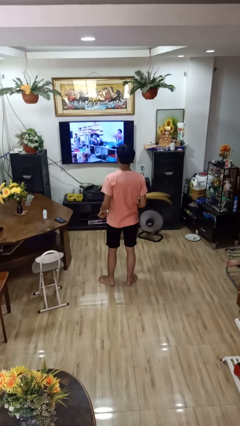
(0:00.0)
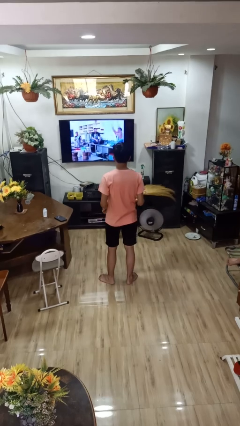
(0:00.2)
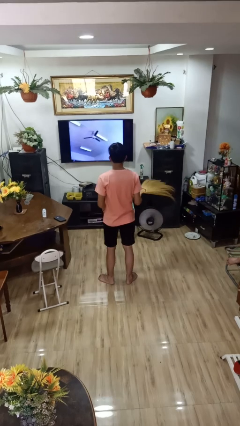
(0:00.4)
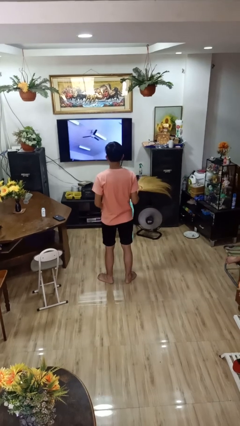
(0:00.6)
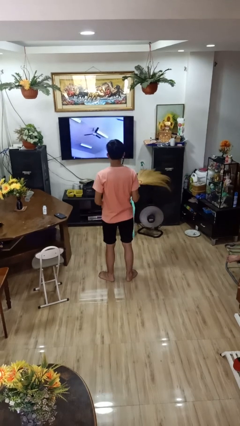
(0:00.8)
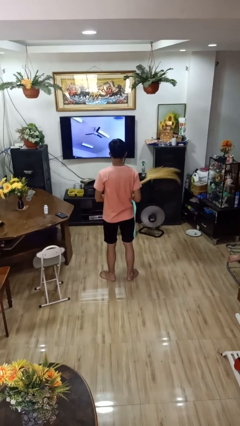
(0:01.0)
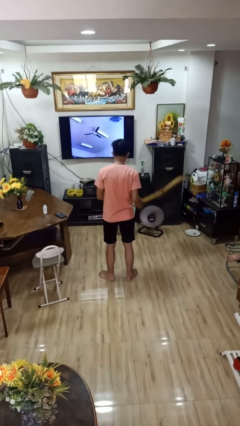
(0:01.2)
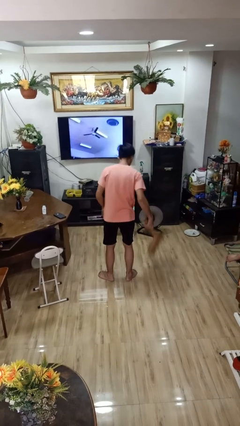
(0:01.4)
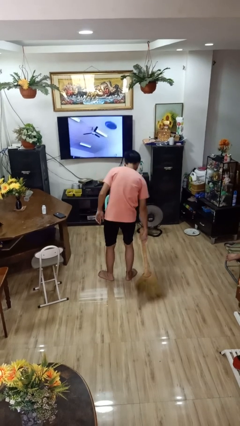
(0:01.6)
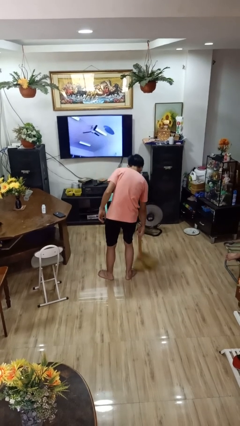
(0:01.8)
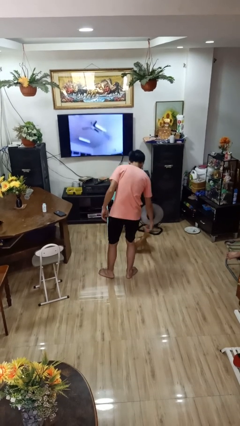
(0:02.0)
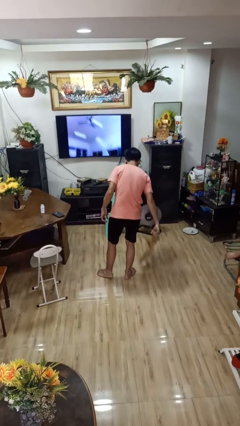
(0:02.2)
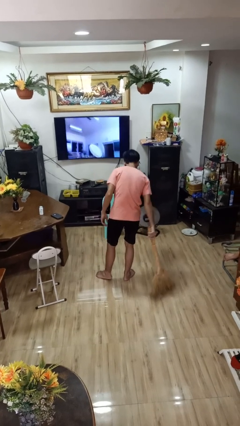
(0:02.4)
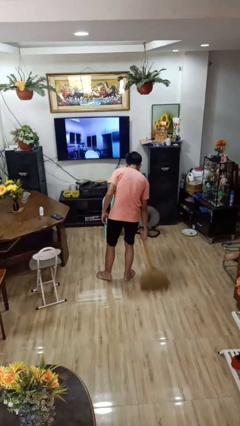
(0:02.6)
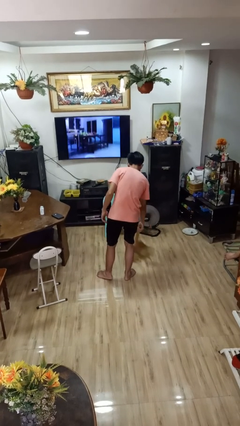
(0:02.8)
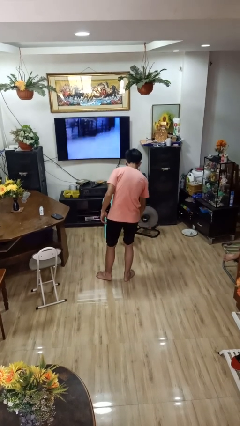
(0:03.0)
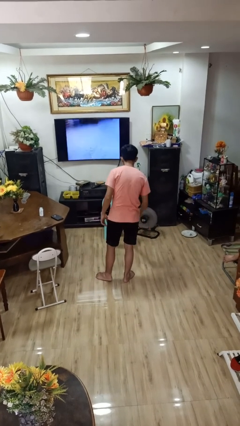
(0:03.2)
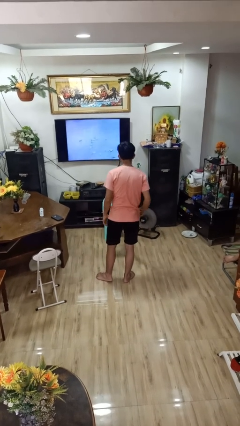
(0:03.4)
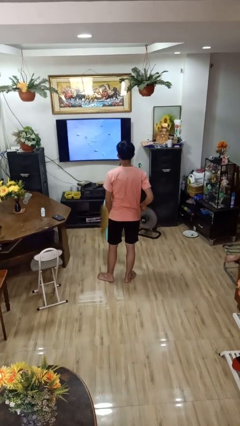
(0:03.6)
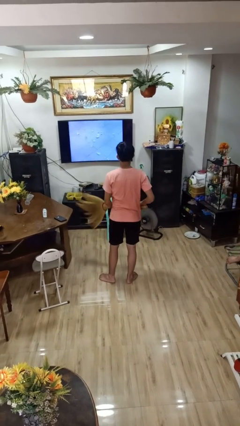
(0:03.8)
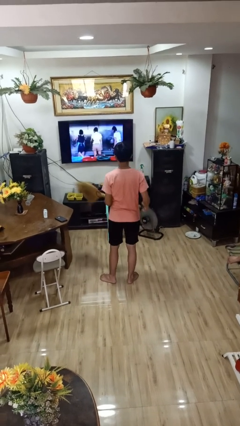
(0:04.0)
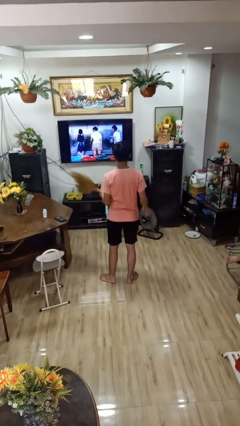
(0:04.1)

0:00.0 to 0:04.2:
person sweeps floor

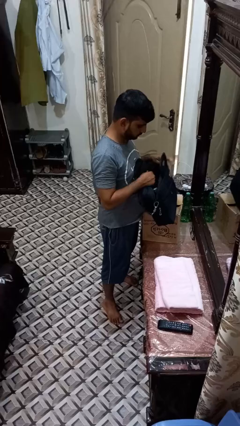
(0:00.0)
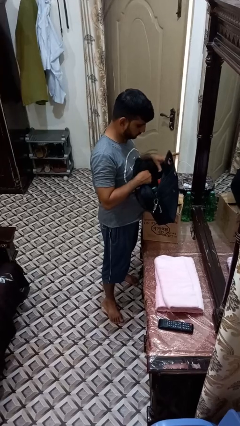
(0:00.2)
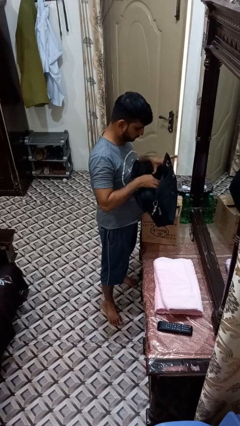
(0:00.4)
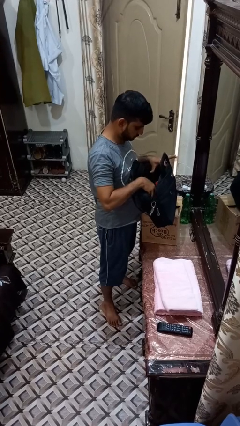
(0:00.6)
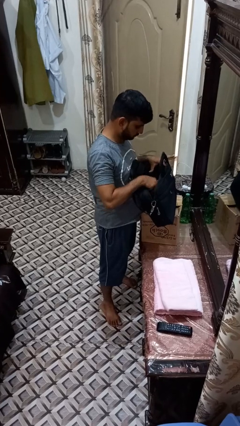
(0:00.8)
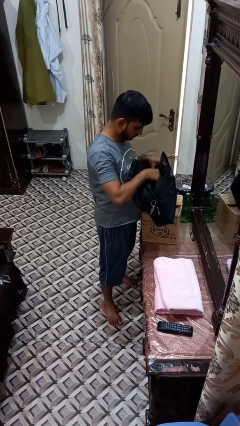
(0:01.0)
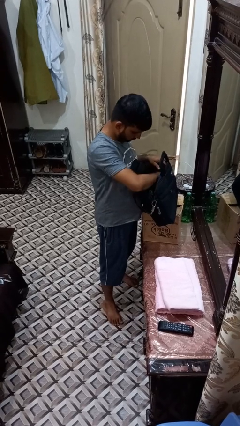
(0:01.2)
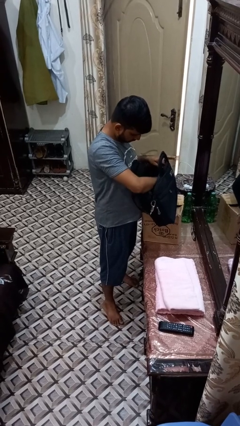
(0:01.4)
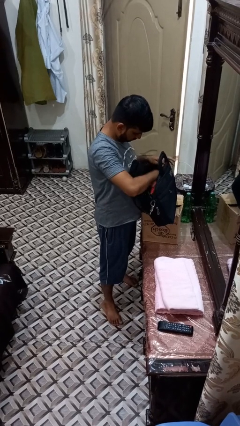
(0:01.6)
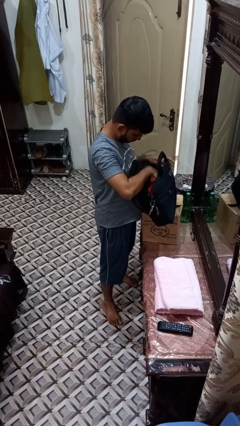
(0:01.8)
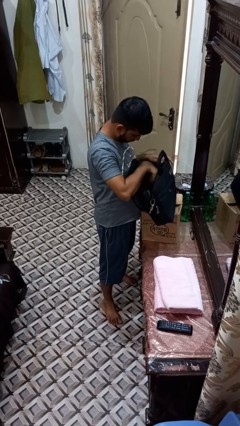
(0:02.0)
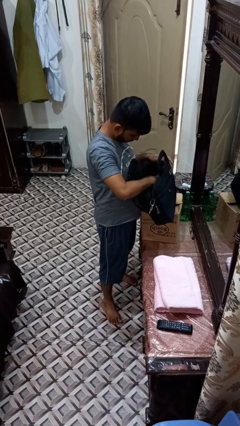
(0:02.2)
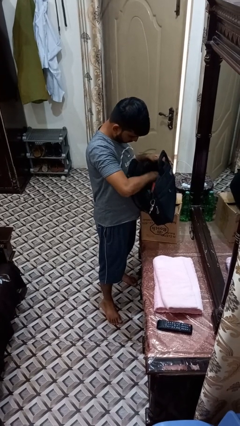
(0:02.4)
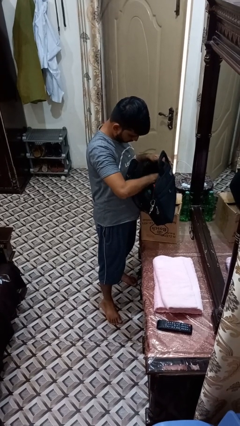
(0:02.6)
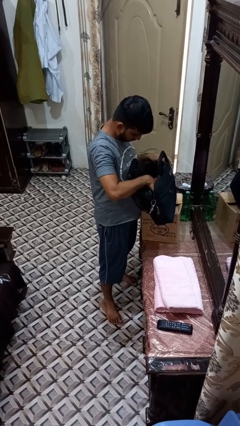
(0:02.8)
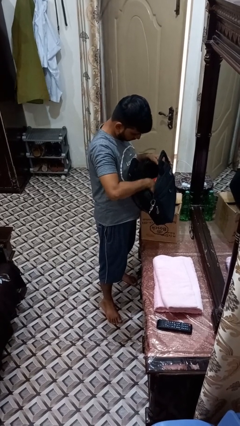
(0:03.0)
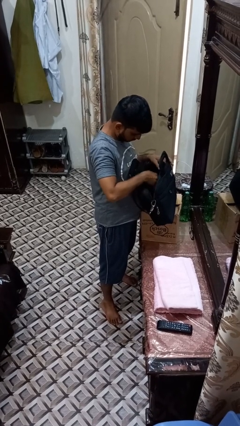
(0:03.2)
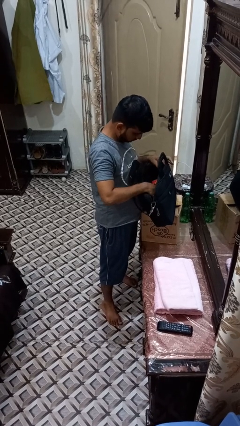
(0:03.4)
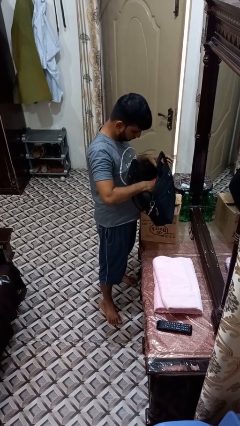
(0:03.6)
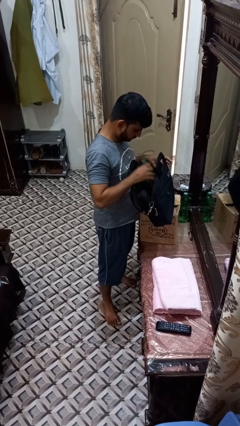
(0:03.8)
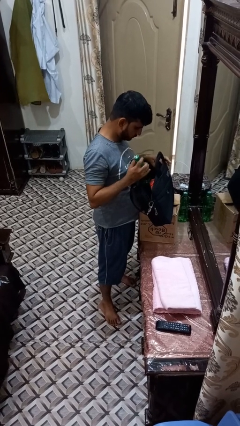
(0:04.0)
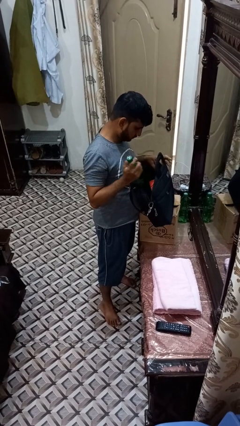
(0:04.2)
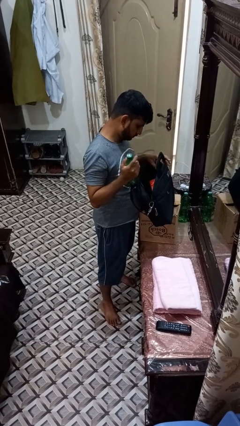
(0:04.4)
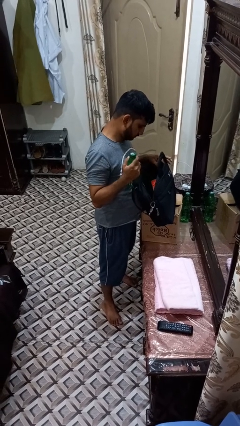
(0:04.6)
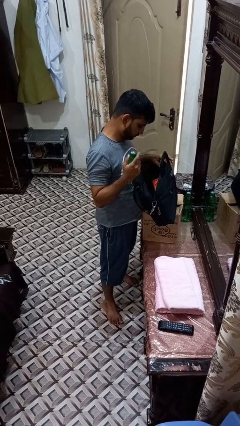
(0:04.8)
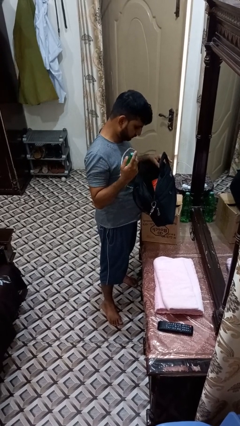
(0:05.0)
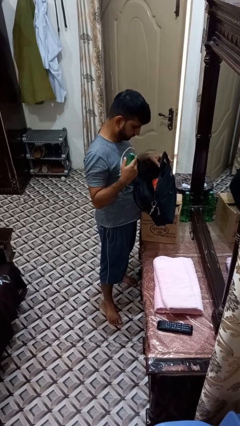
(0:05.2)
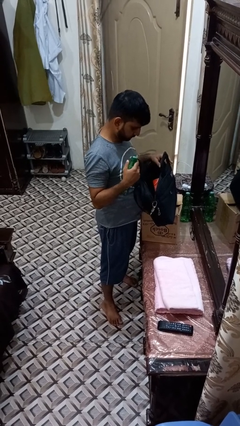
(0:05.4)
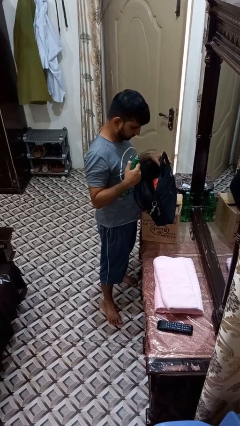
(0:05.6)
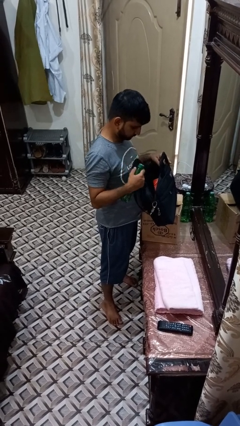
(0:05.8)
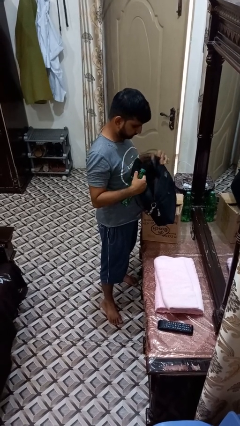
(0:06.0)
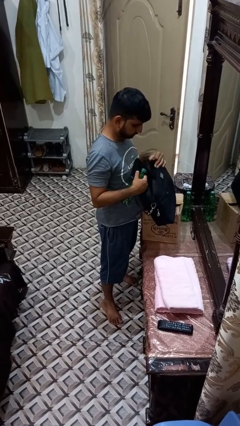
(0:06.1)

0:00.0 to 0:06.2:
person searches in bag

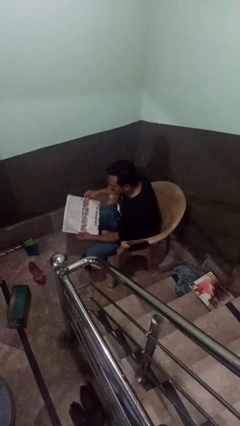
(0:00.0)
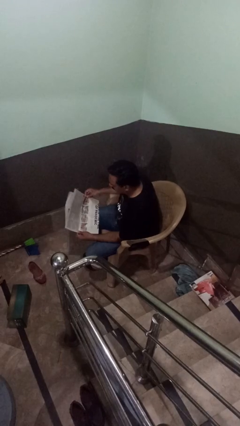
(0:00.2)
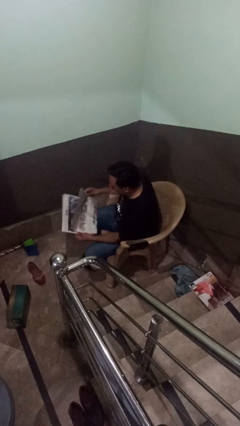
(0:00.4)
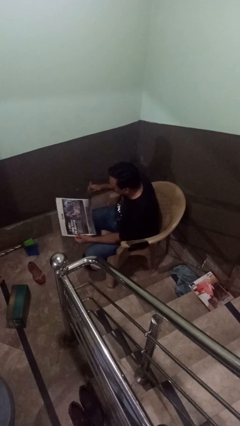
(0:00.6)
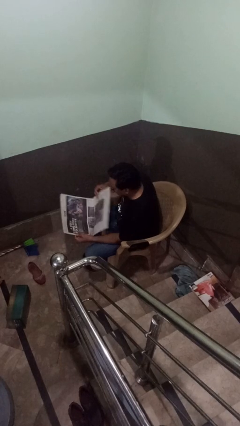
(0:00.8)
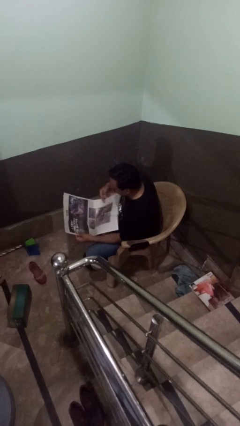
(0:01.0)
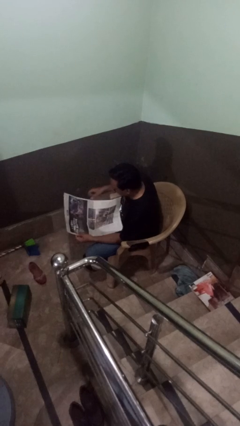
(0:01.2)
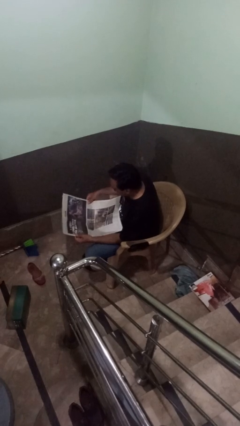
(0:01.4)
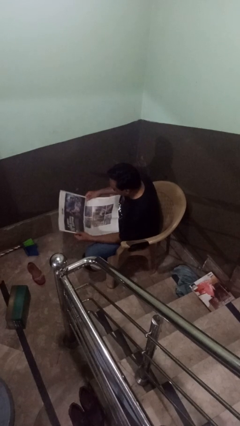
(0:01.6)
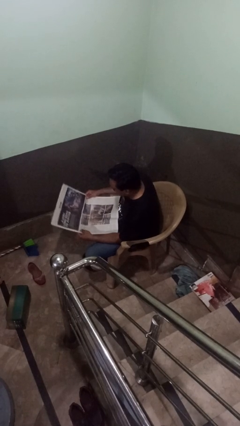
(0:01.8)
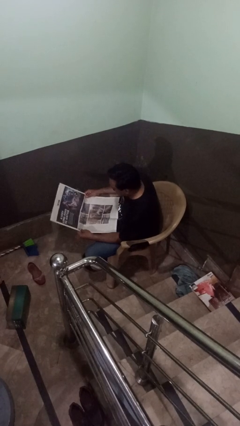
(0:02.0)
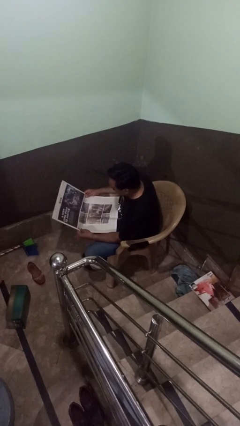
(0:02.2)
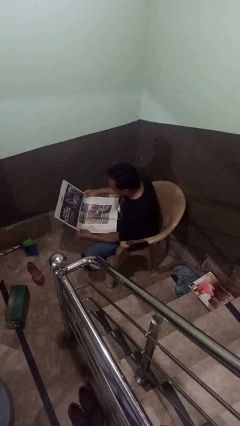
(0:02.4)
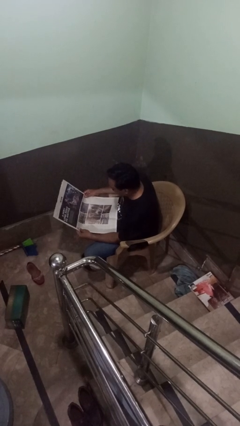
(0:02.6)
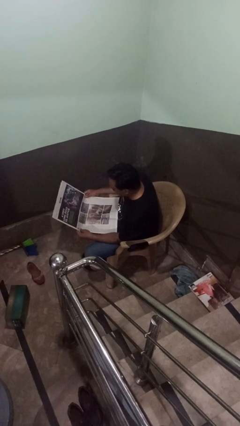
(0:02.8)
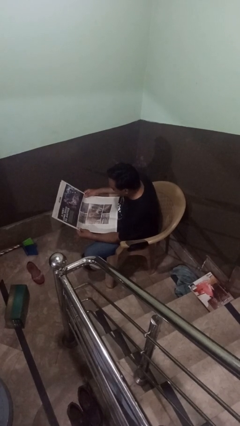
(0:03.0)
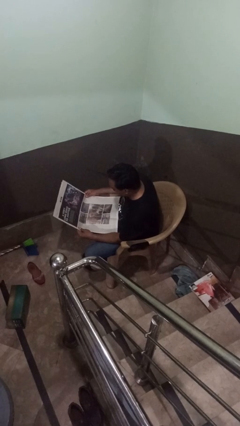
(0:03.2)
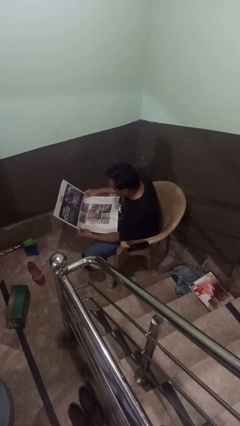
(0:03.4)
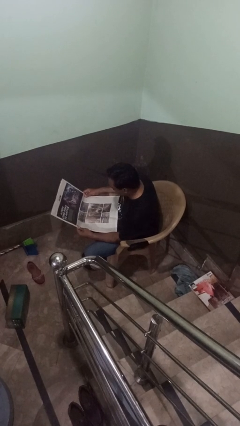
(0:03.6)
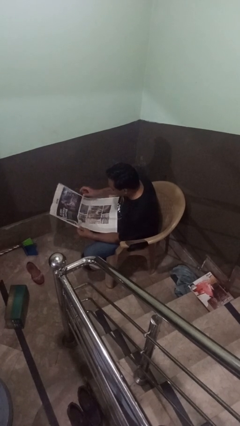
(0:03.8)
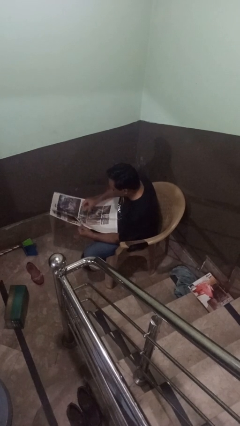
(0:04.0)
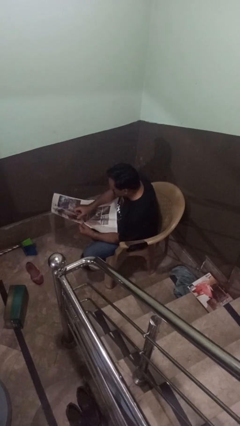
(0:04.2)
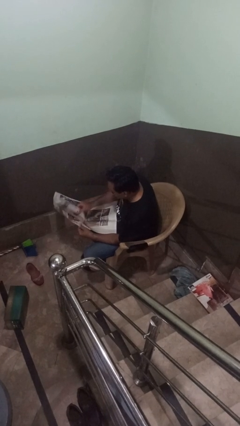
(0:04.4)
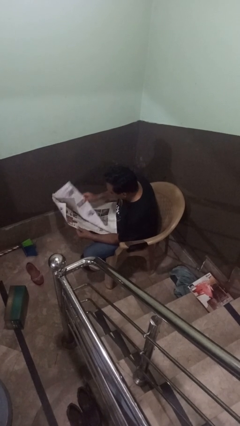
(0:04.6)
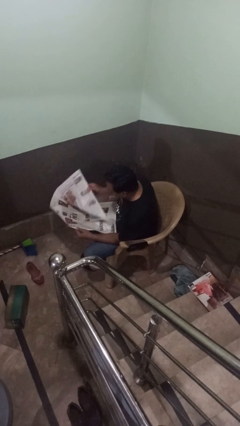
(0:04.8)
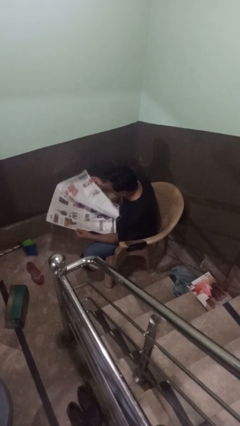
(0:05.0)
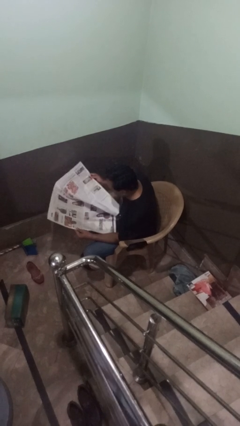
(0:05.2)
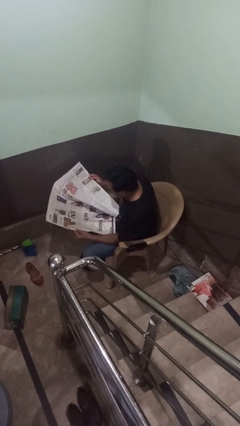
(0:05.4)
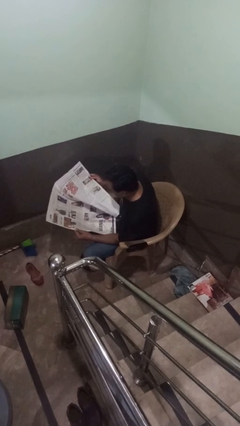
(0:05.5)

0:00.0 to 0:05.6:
person reads newspaper

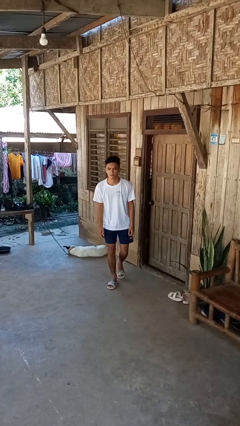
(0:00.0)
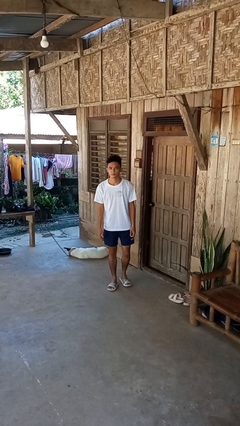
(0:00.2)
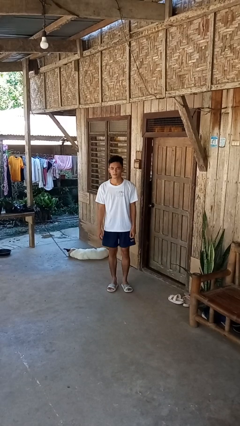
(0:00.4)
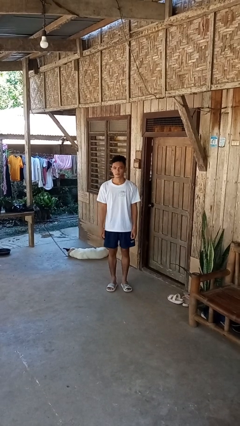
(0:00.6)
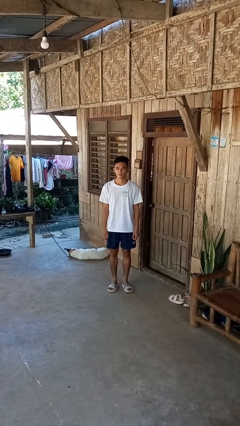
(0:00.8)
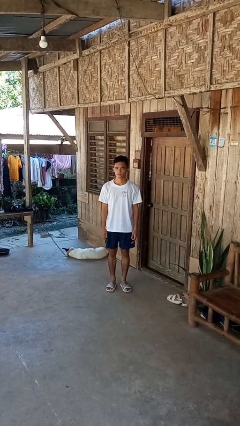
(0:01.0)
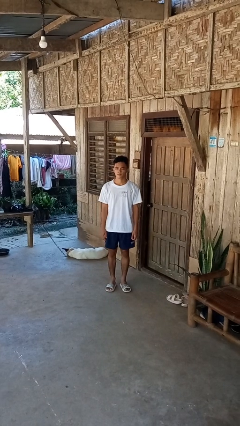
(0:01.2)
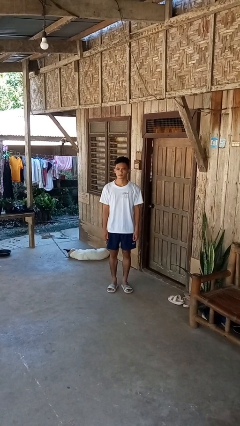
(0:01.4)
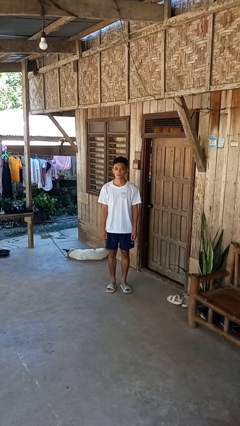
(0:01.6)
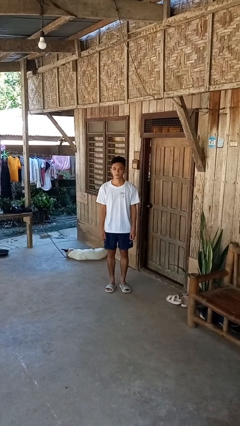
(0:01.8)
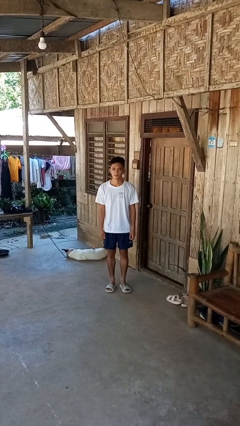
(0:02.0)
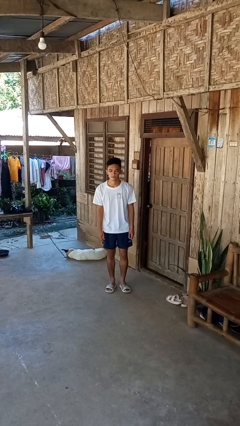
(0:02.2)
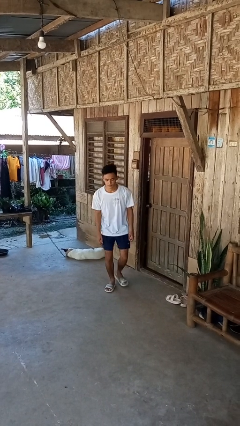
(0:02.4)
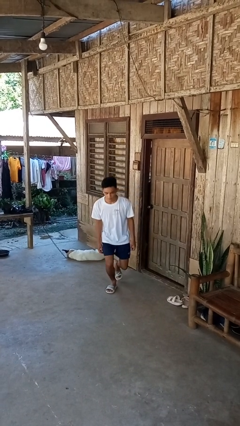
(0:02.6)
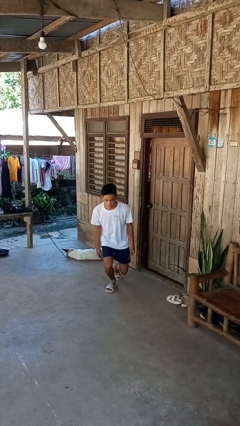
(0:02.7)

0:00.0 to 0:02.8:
person stands up from floor
